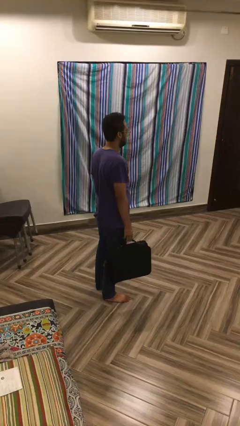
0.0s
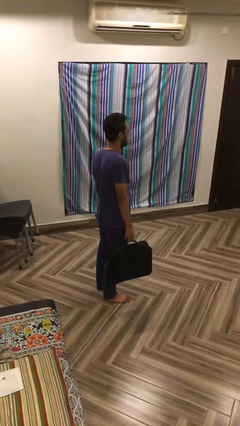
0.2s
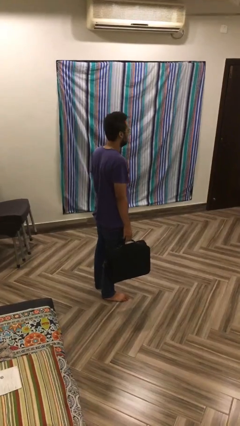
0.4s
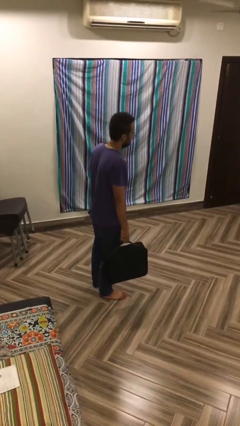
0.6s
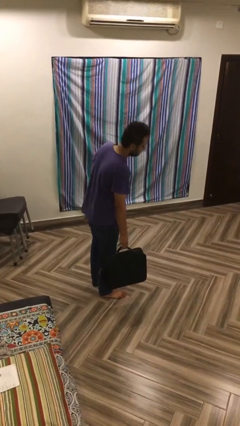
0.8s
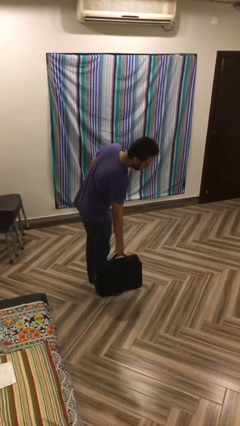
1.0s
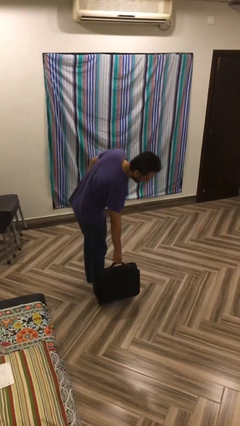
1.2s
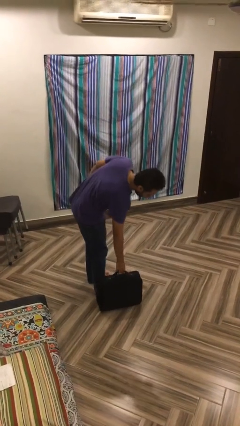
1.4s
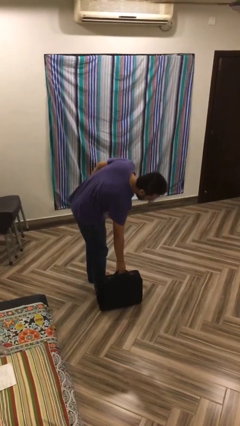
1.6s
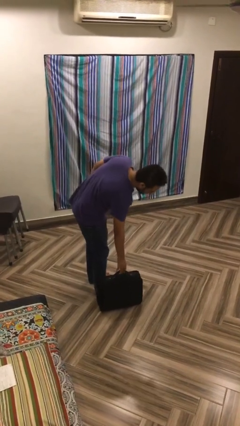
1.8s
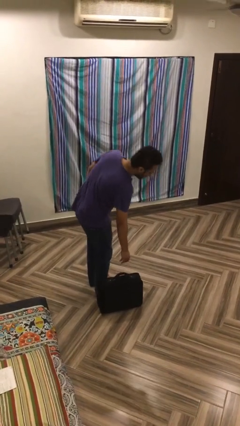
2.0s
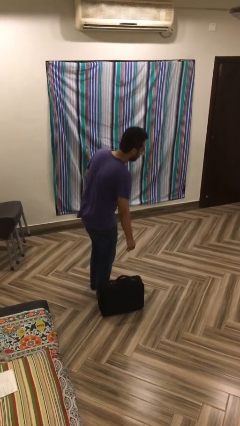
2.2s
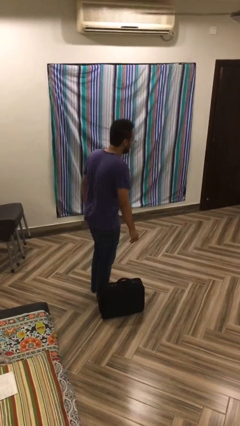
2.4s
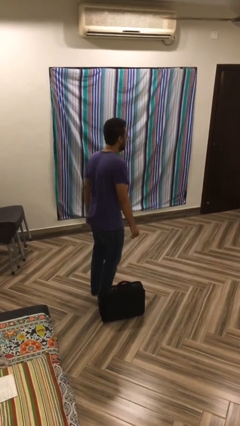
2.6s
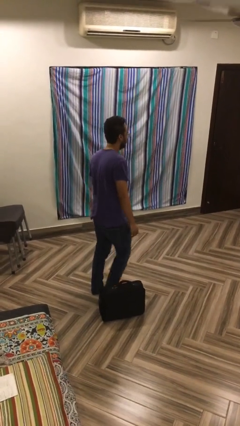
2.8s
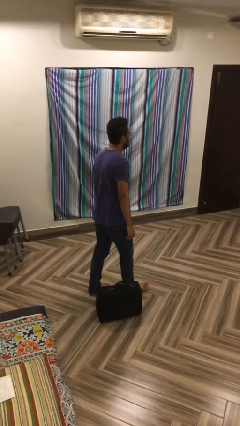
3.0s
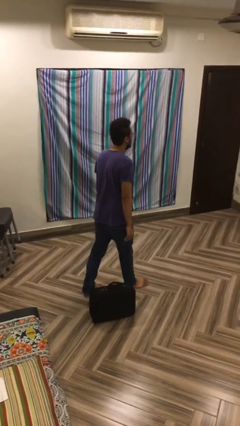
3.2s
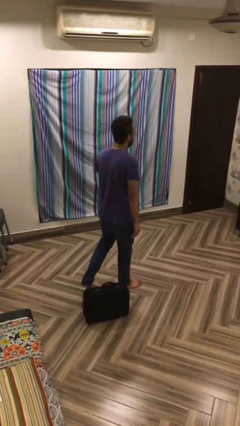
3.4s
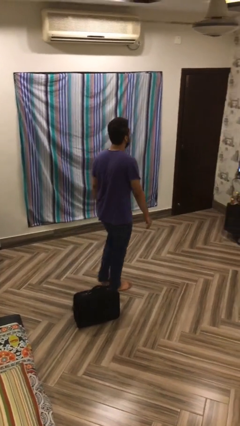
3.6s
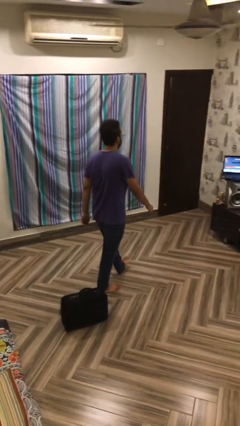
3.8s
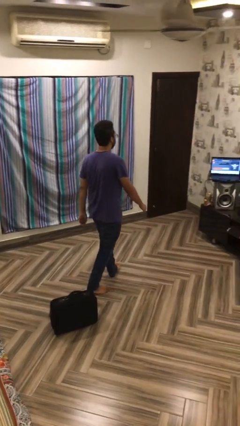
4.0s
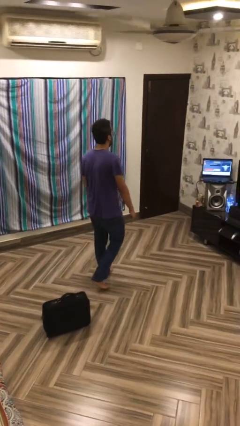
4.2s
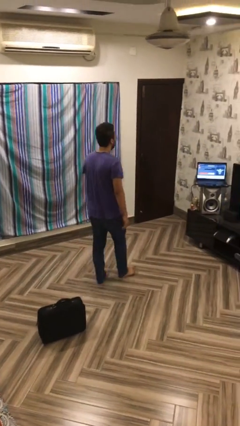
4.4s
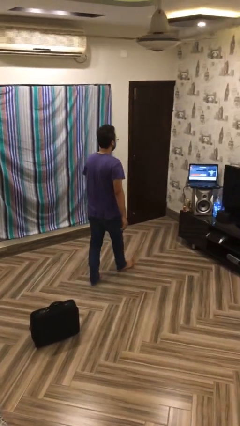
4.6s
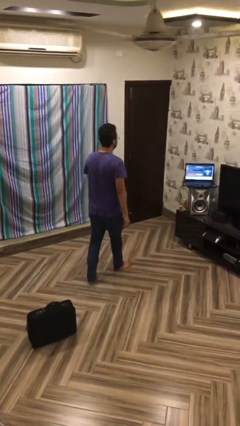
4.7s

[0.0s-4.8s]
person puts down object on floor

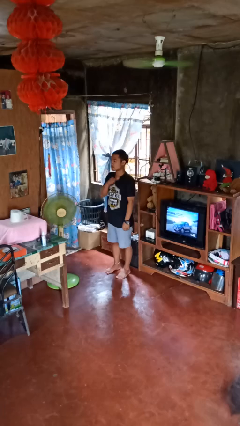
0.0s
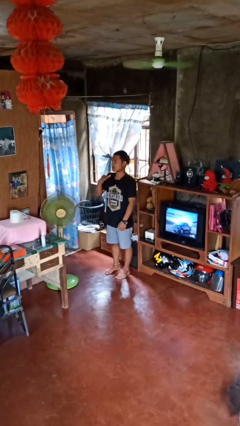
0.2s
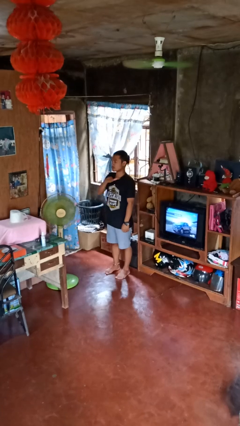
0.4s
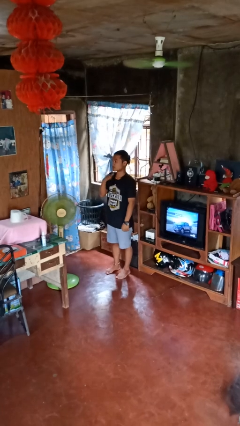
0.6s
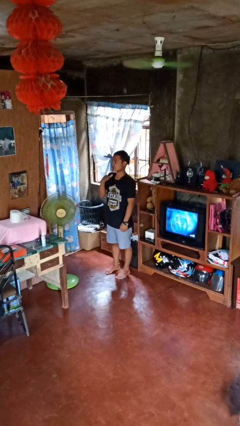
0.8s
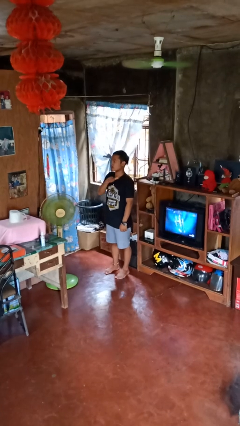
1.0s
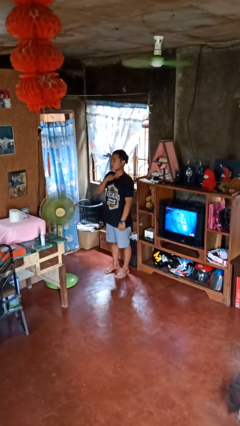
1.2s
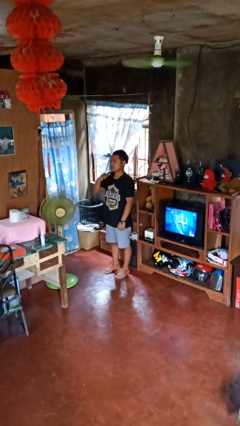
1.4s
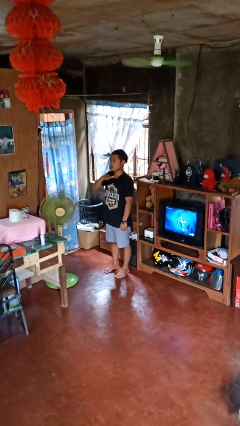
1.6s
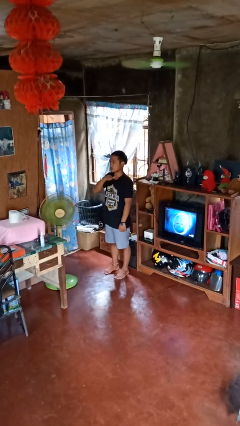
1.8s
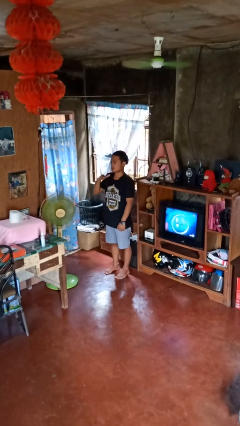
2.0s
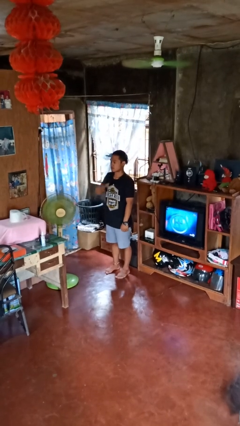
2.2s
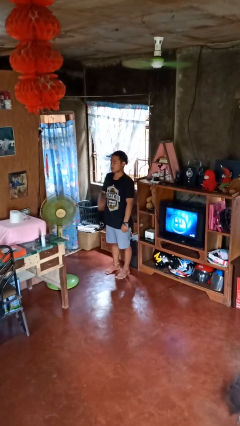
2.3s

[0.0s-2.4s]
person gestures cut

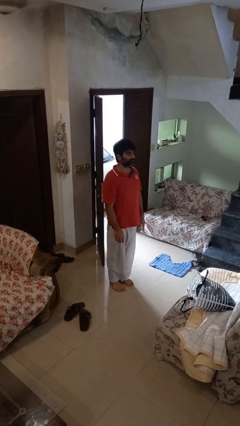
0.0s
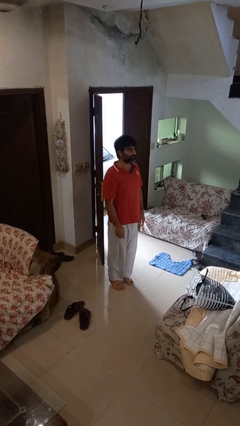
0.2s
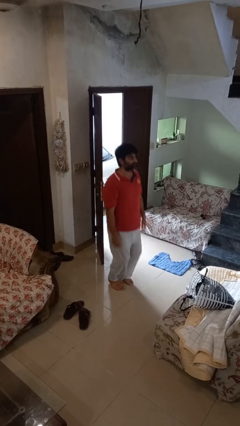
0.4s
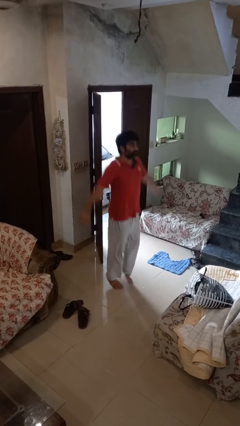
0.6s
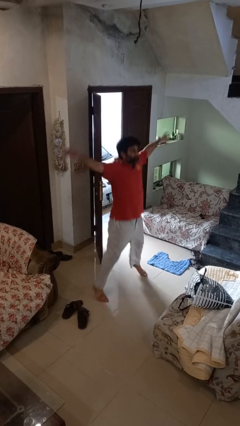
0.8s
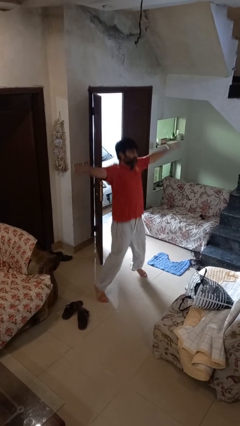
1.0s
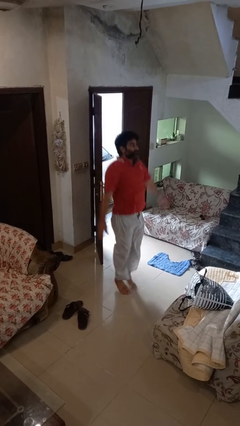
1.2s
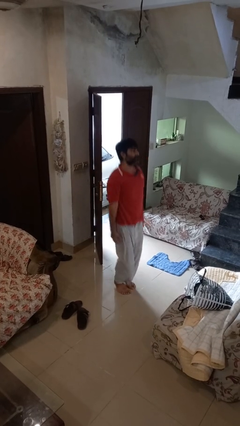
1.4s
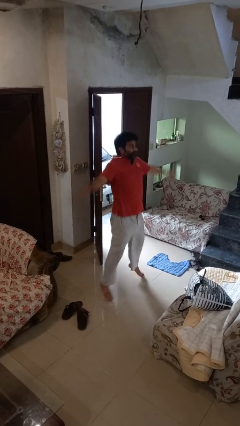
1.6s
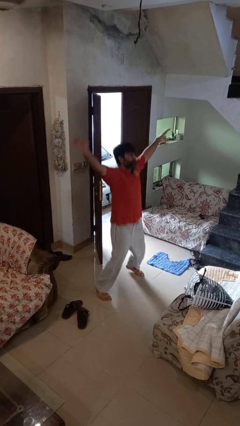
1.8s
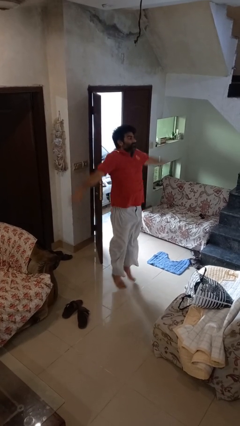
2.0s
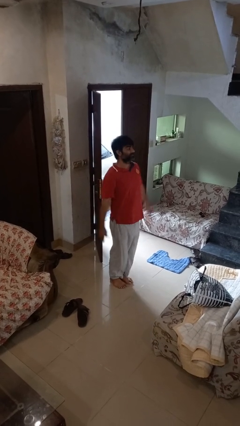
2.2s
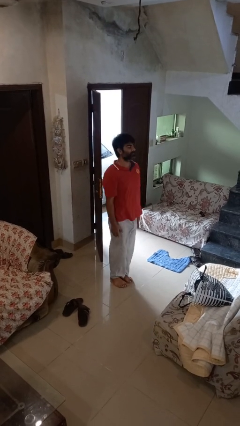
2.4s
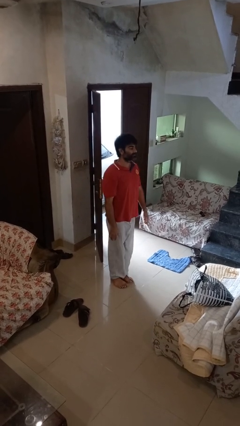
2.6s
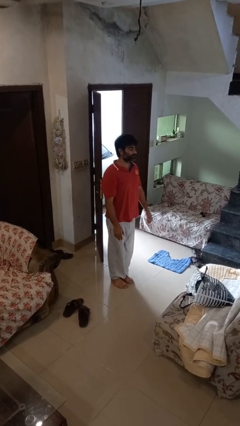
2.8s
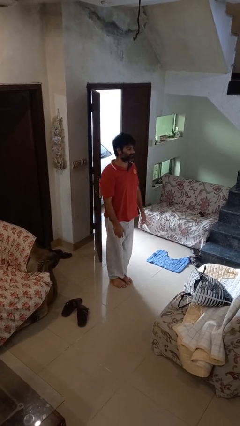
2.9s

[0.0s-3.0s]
person exercises with jumping jacks

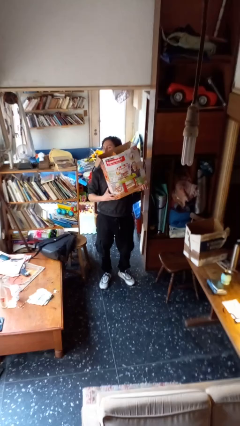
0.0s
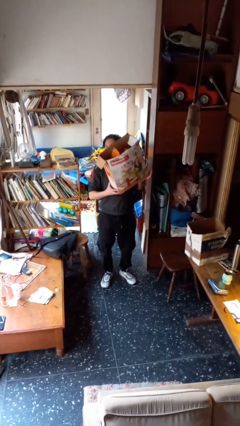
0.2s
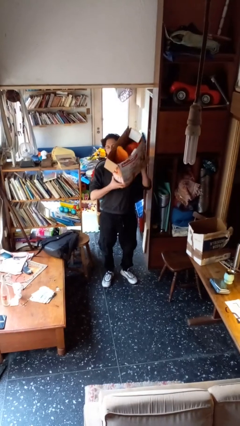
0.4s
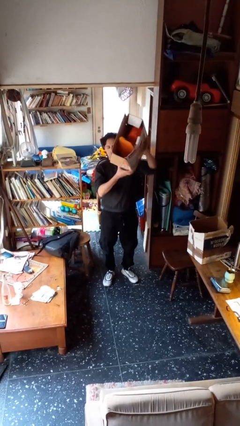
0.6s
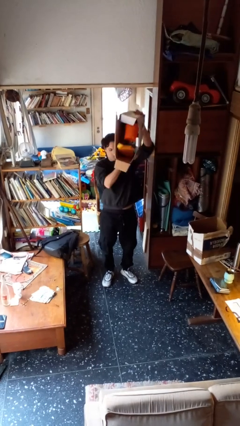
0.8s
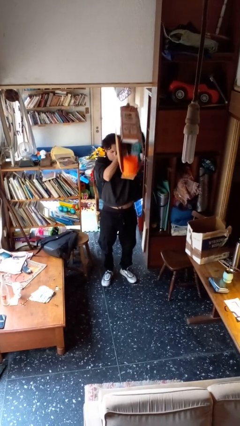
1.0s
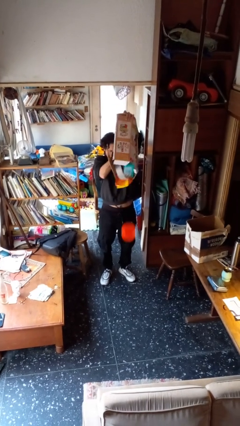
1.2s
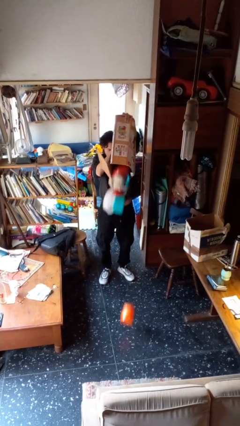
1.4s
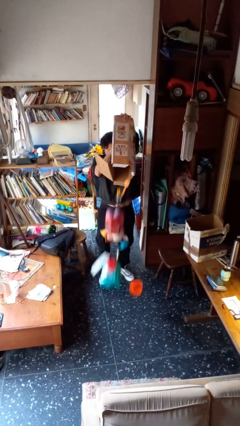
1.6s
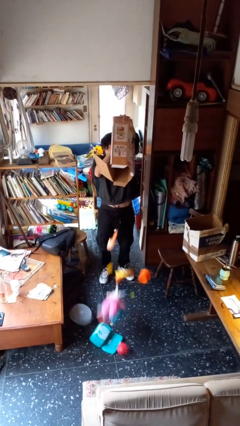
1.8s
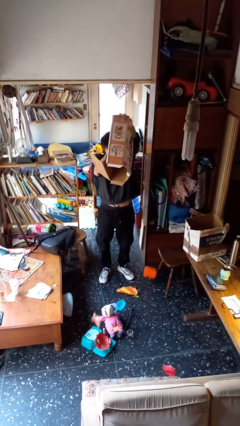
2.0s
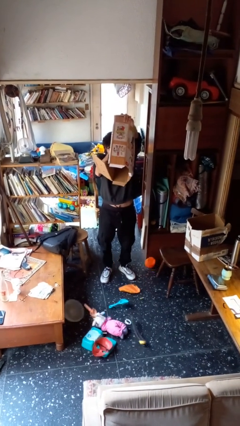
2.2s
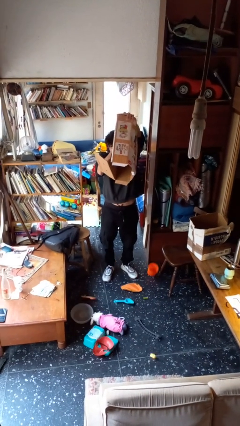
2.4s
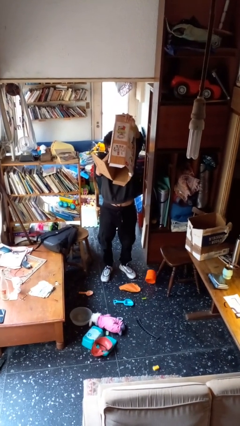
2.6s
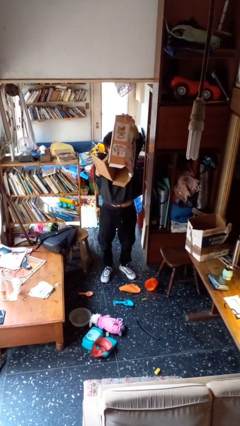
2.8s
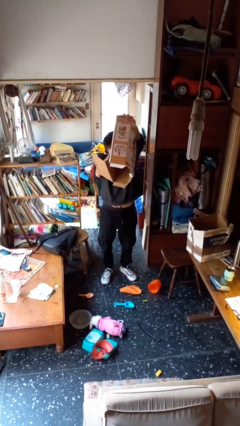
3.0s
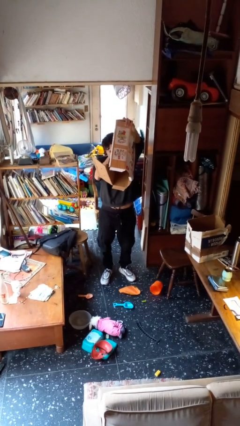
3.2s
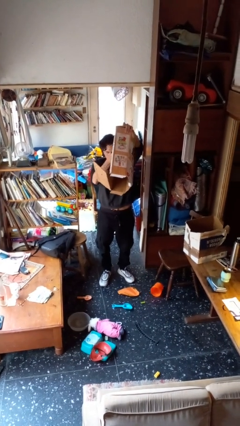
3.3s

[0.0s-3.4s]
person unloads box onto floor

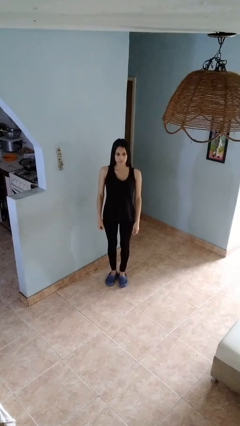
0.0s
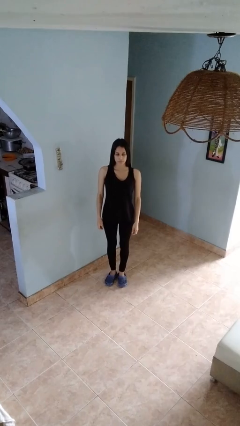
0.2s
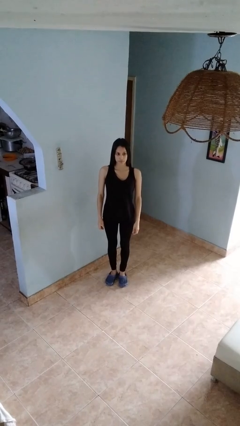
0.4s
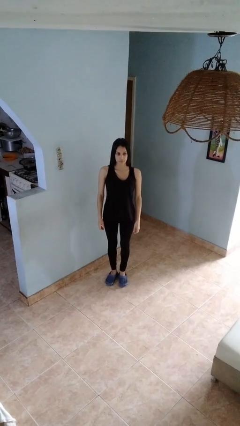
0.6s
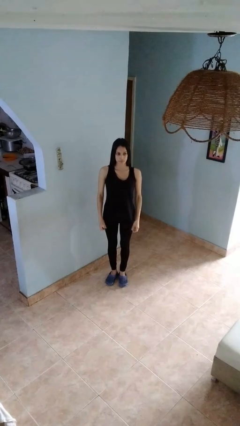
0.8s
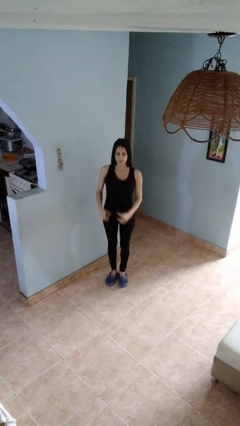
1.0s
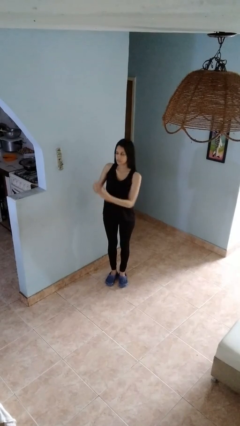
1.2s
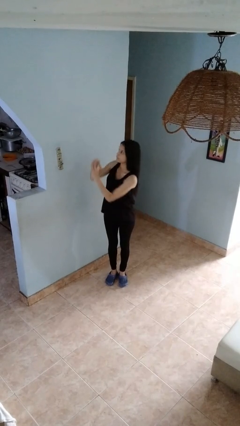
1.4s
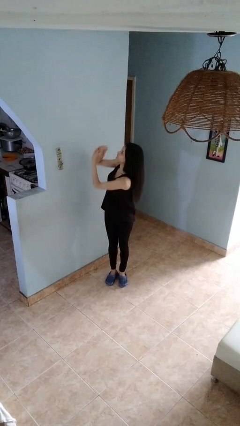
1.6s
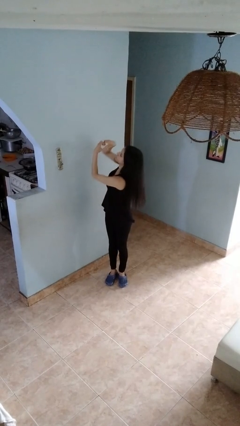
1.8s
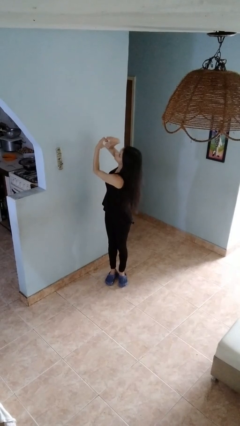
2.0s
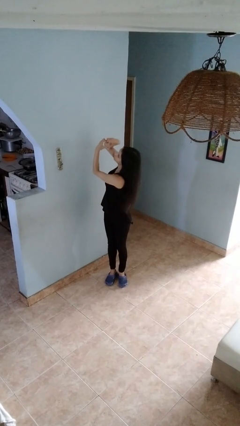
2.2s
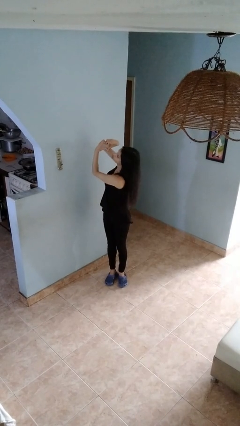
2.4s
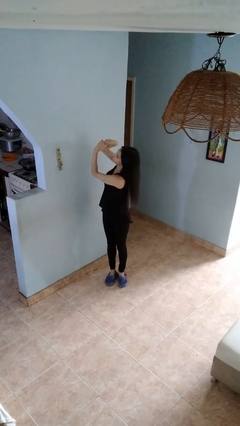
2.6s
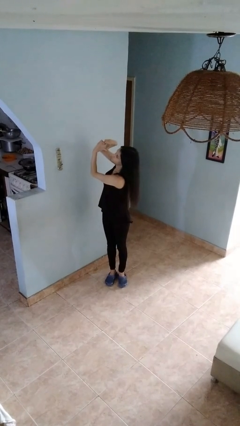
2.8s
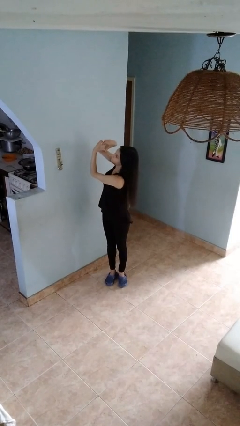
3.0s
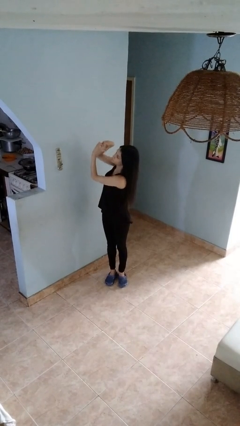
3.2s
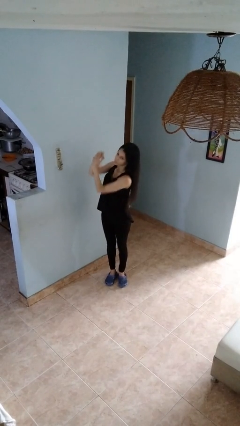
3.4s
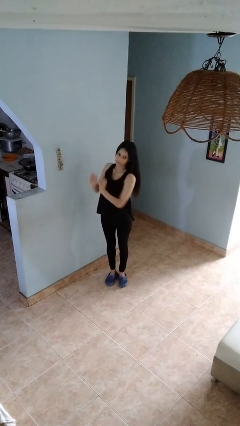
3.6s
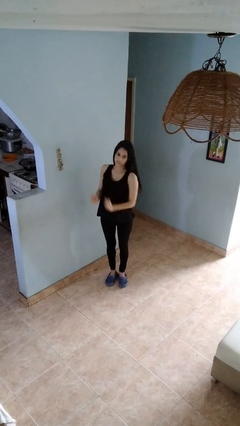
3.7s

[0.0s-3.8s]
person gestures heart
